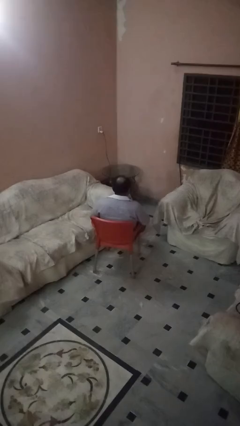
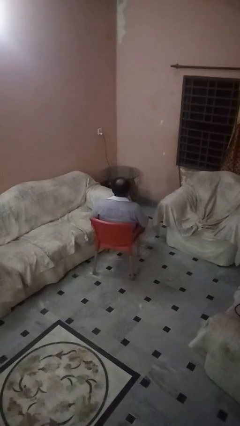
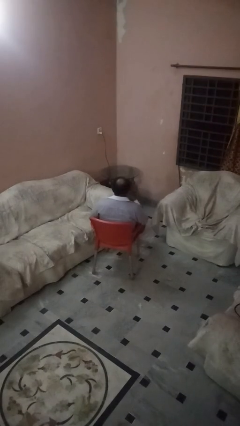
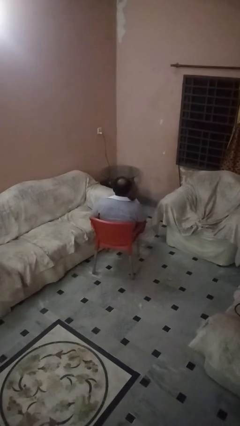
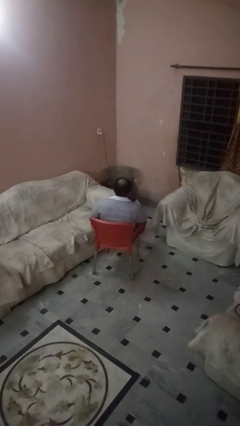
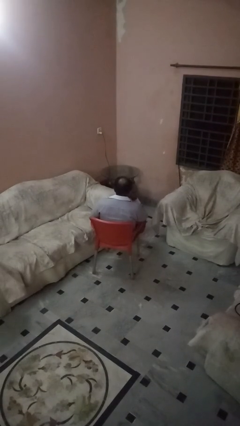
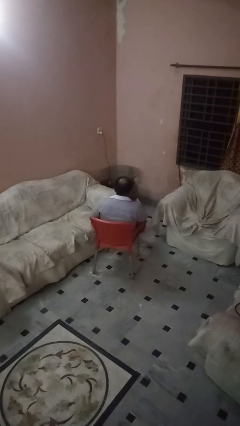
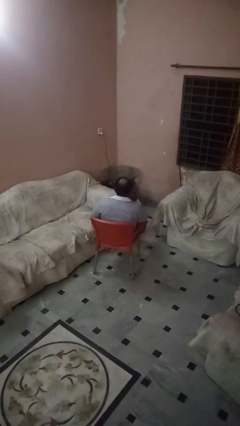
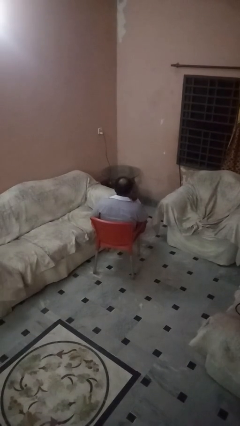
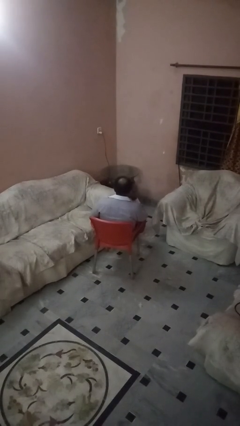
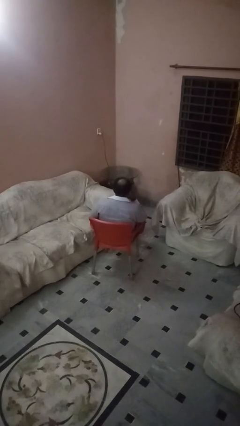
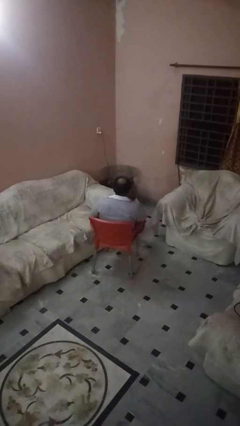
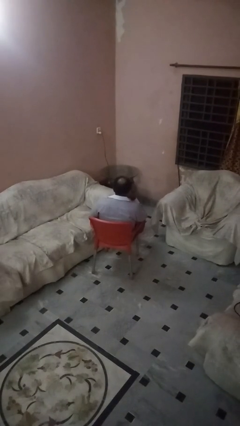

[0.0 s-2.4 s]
person strokes chin

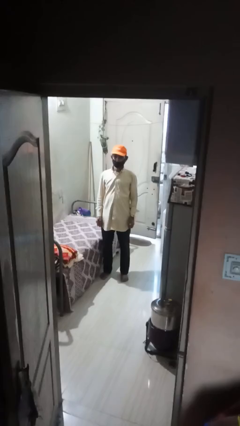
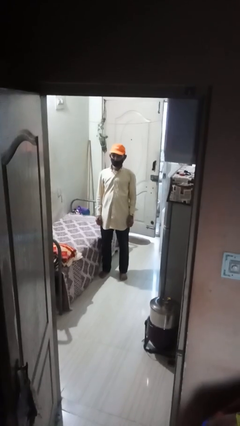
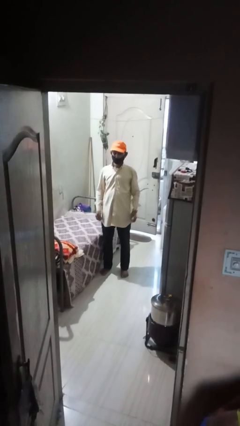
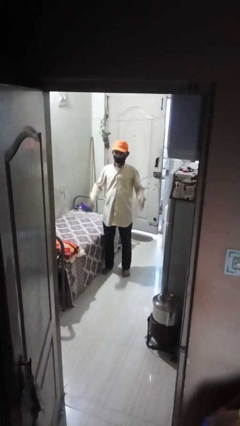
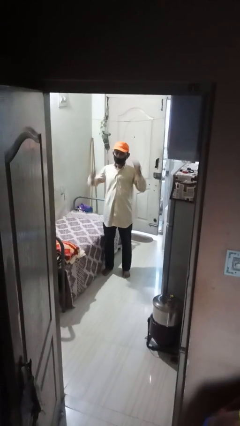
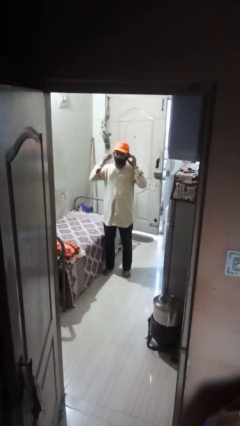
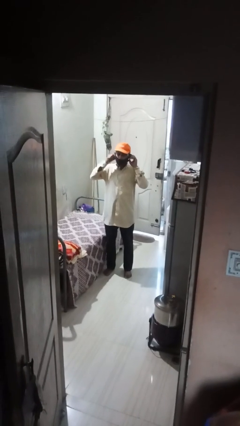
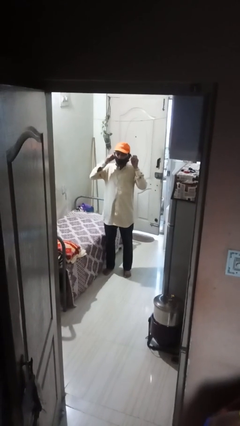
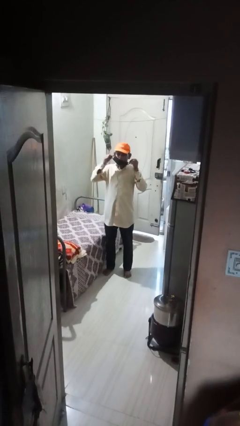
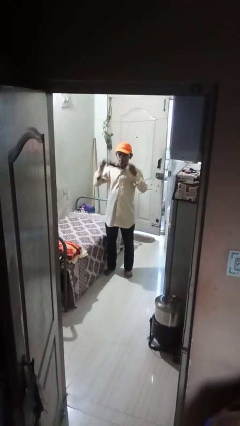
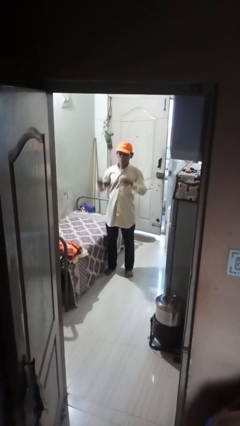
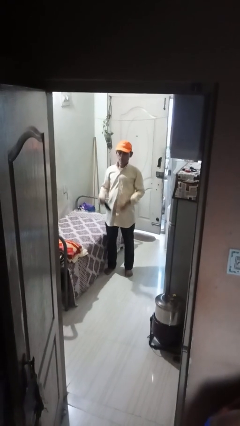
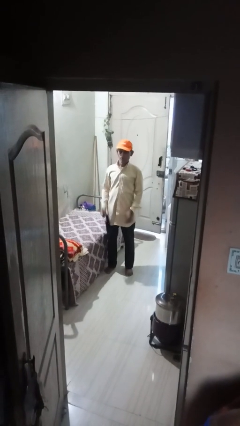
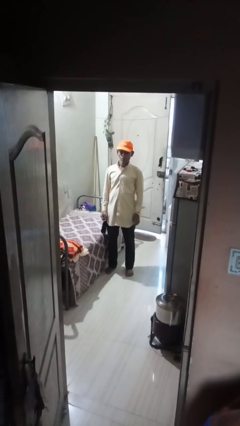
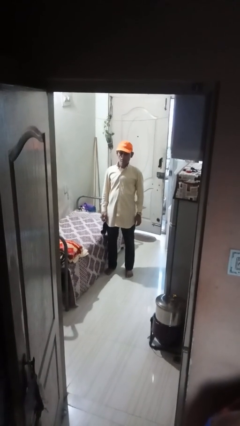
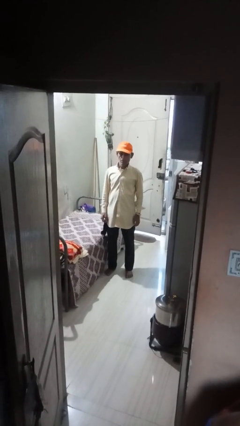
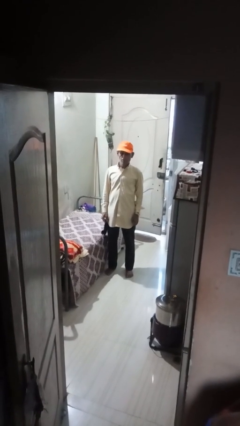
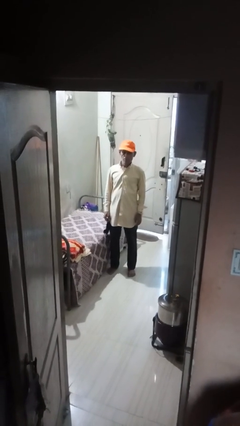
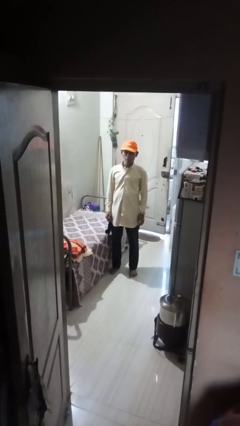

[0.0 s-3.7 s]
person takes off facemask

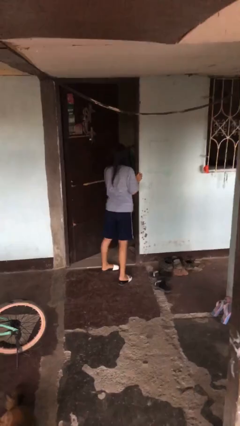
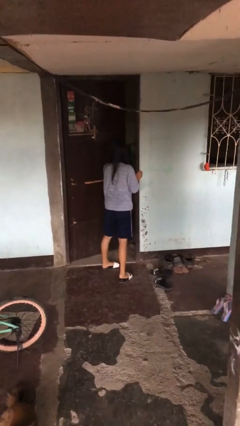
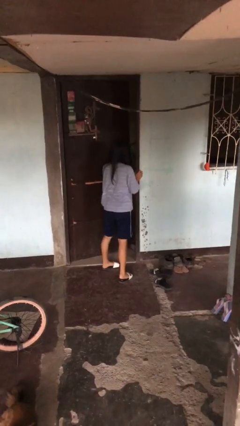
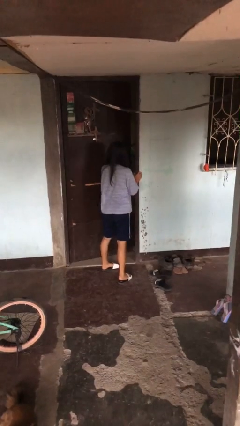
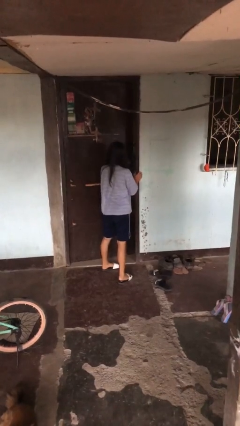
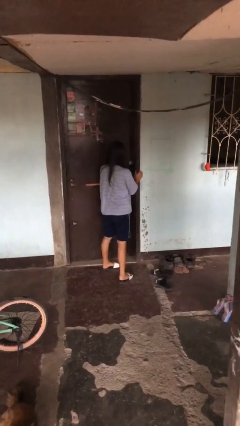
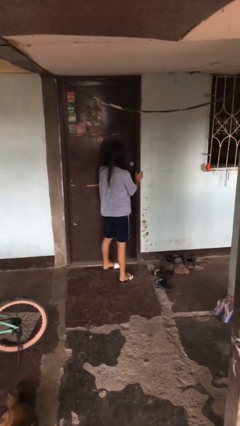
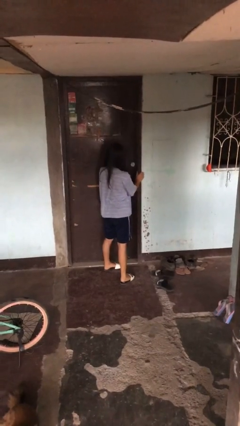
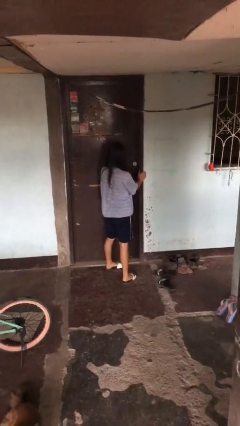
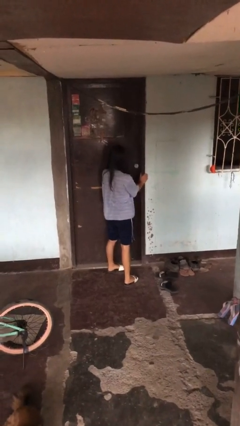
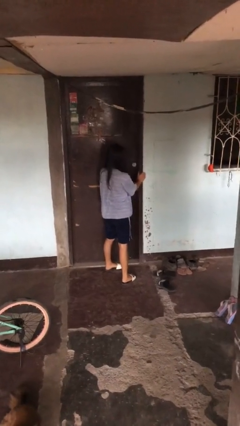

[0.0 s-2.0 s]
person closes facility door

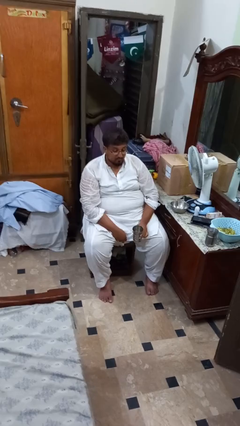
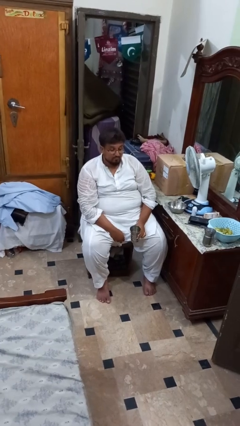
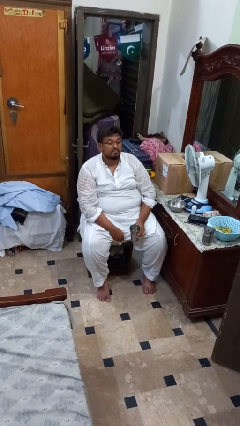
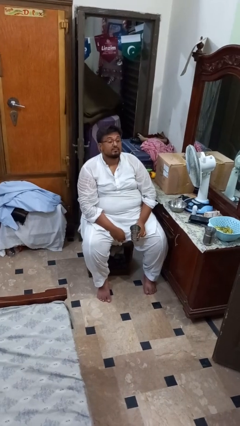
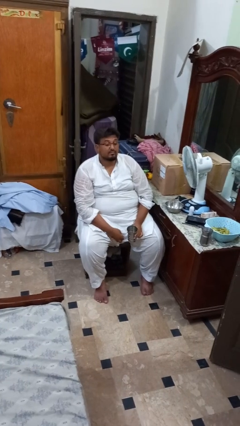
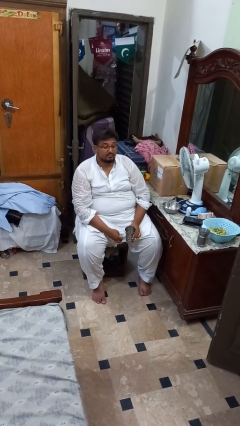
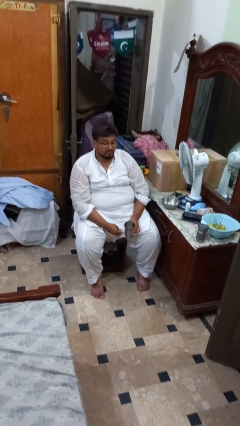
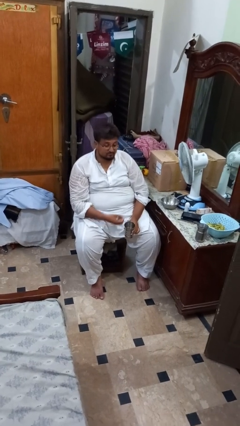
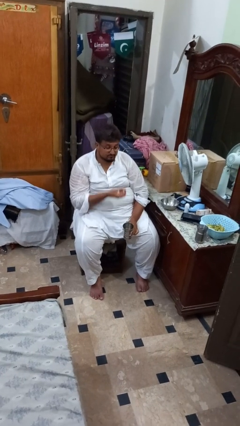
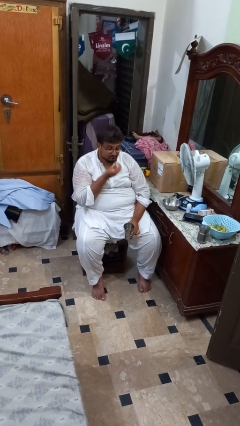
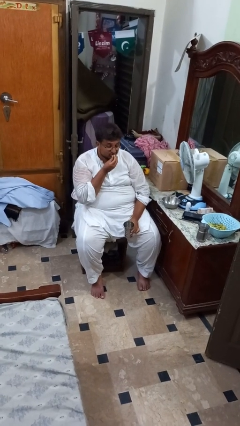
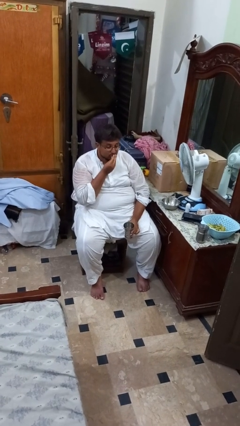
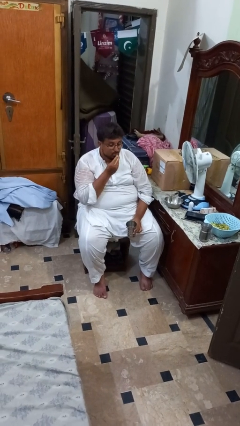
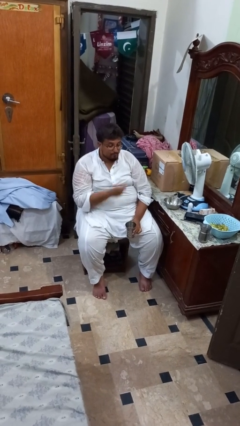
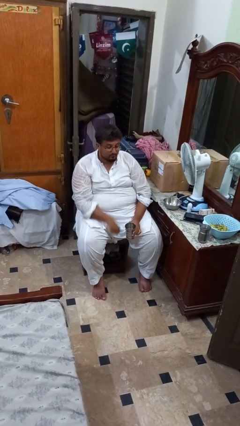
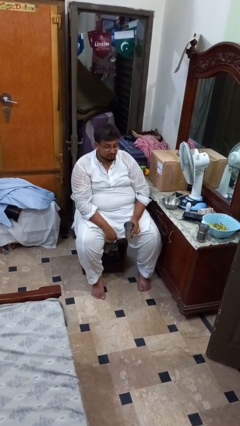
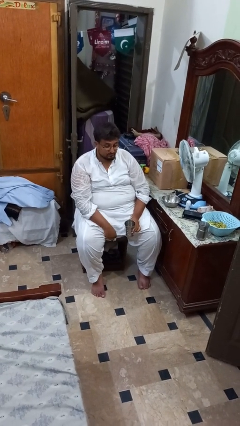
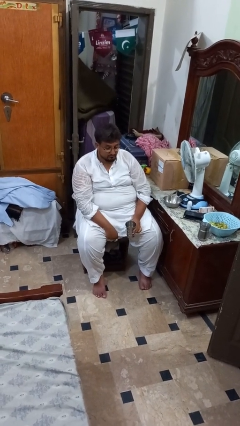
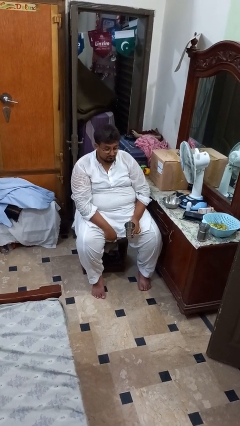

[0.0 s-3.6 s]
person takes medicine pills

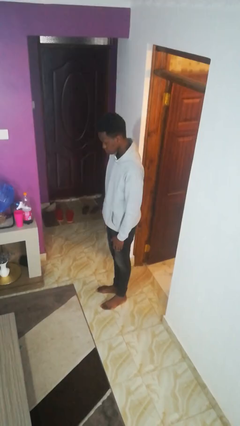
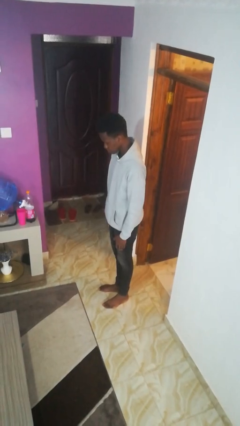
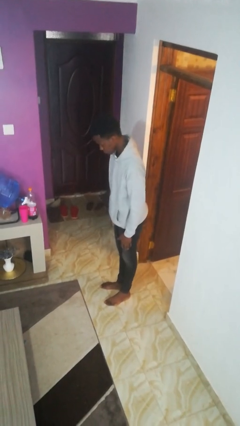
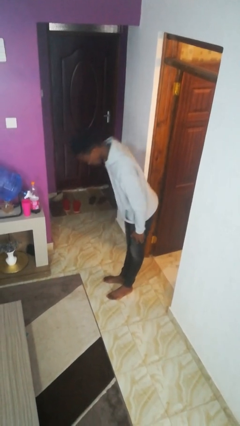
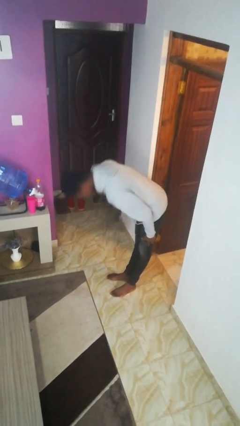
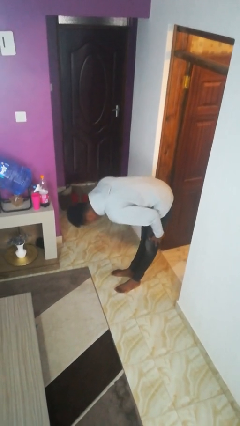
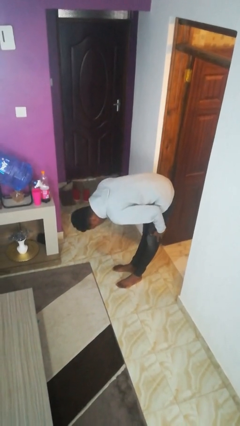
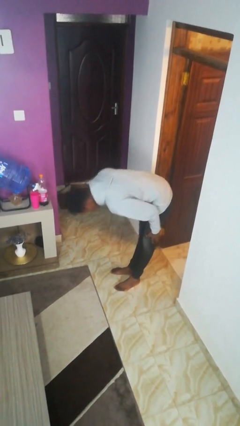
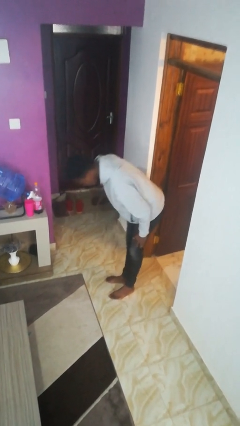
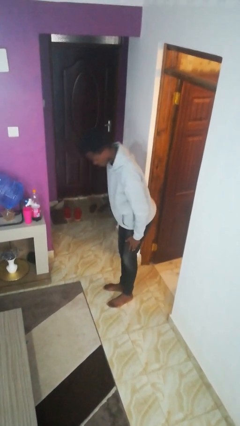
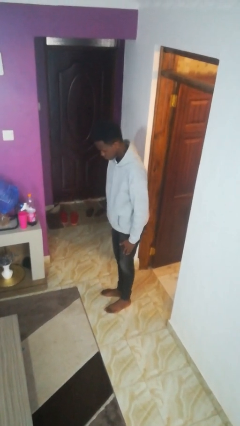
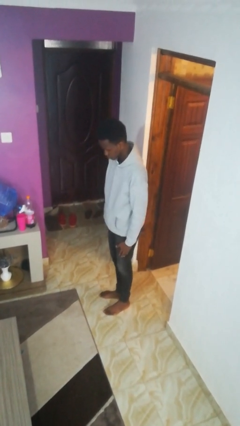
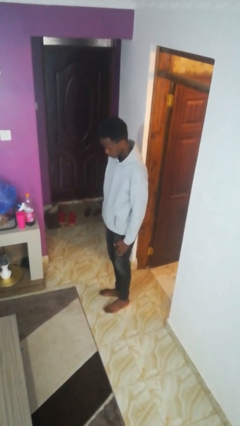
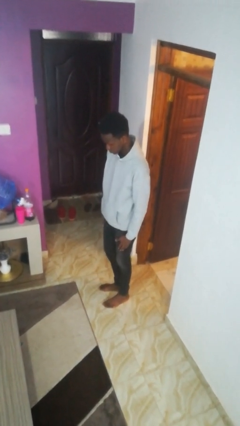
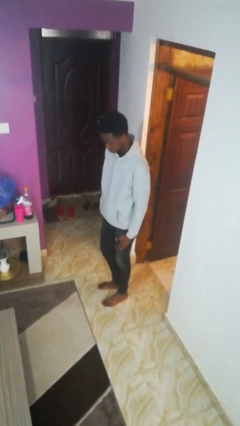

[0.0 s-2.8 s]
person bows

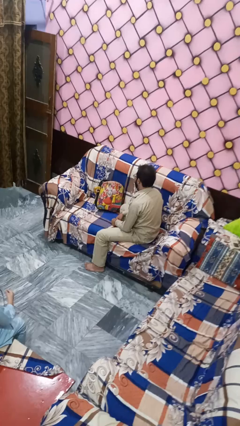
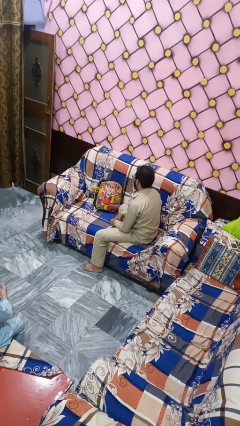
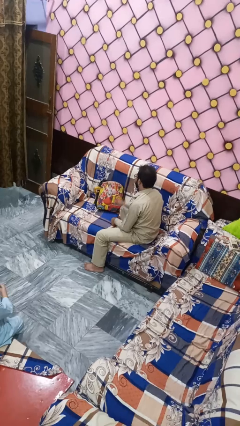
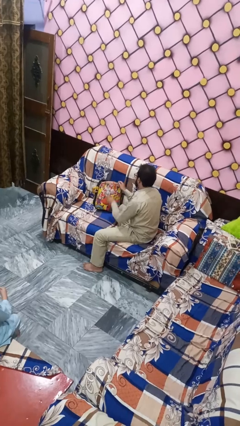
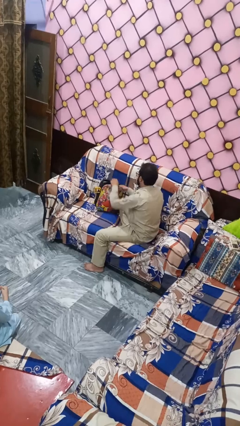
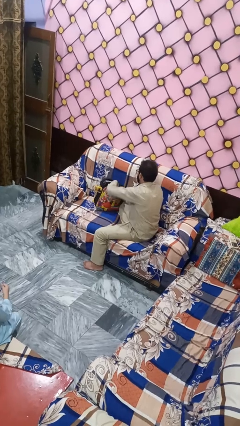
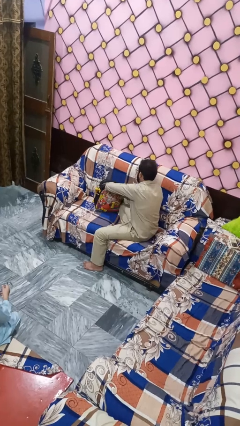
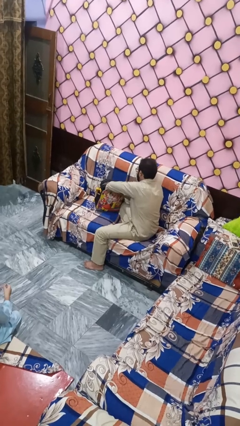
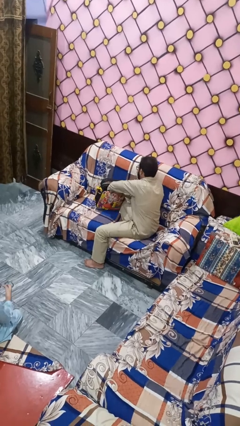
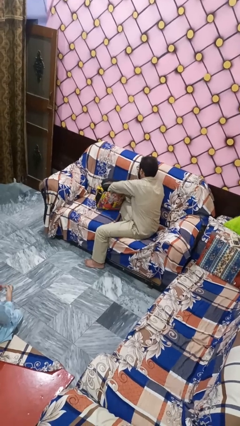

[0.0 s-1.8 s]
person searches in bag

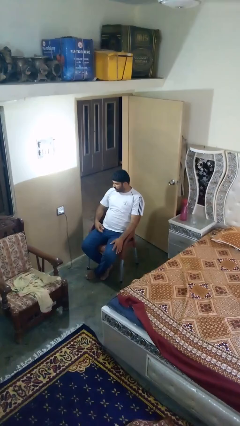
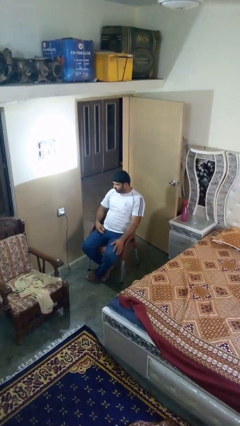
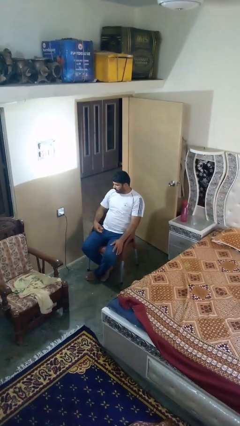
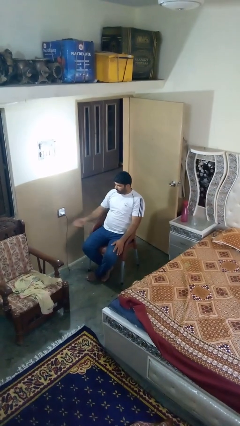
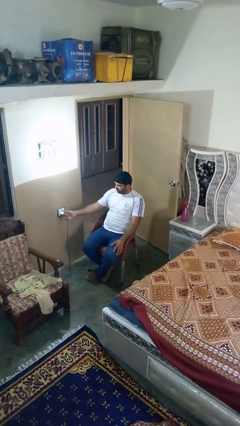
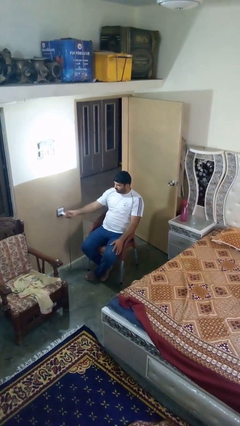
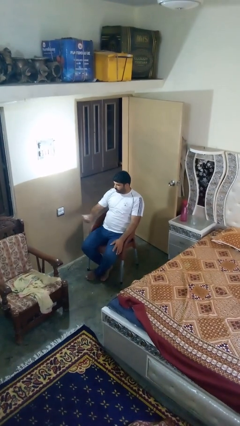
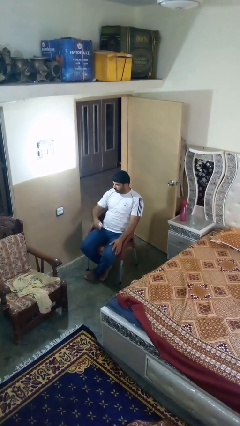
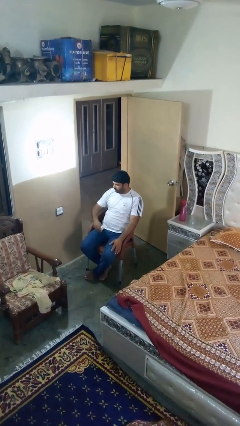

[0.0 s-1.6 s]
person unplugs from electrical socket
